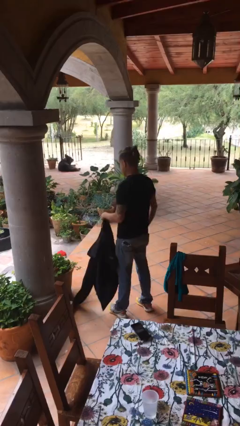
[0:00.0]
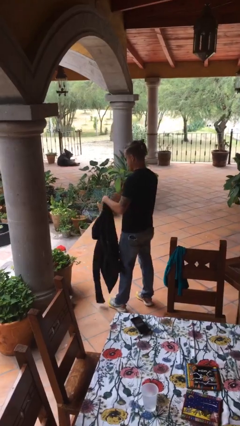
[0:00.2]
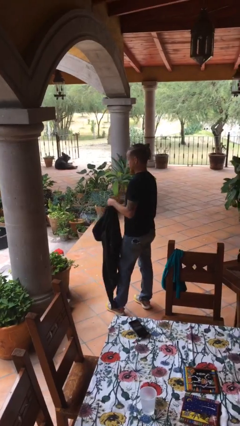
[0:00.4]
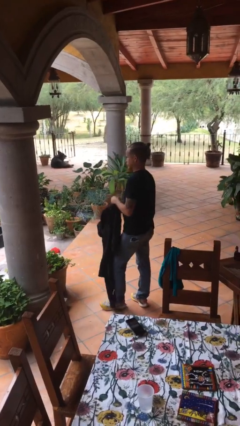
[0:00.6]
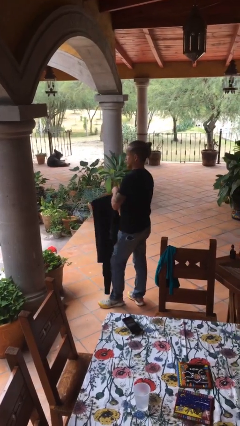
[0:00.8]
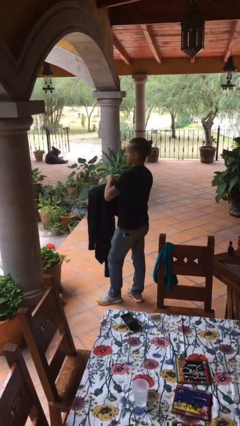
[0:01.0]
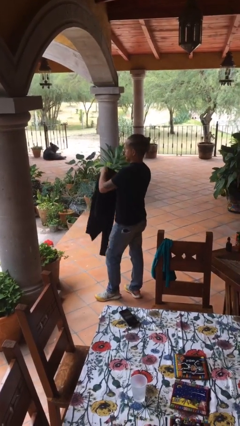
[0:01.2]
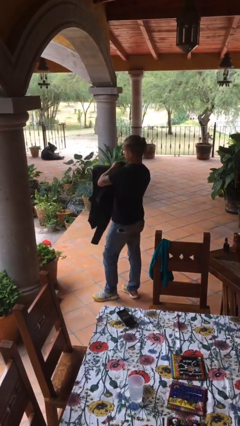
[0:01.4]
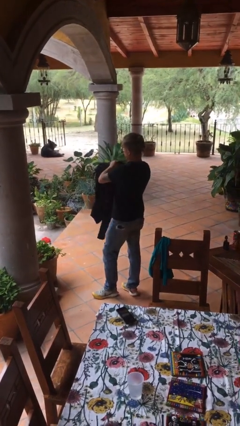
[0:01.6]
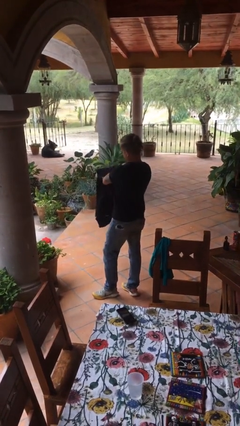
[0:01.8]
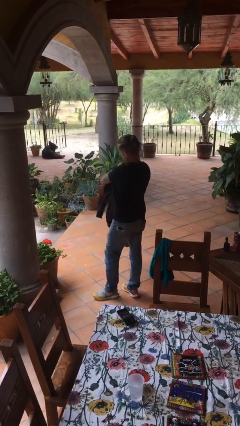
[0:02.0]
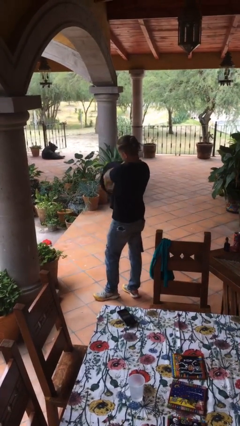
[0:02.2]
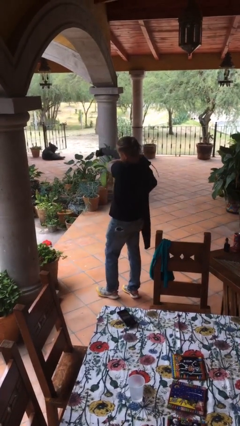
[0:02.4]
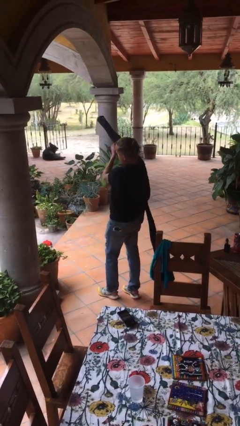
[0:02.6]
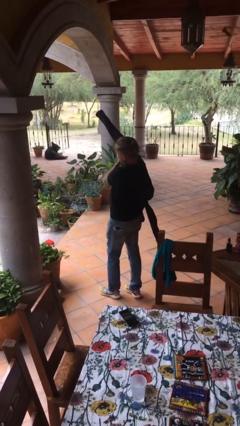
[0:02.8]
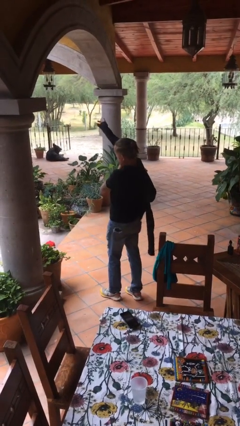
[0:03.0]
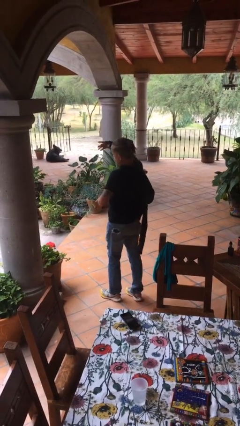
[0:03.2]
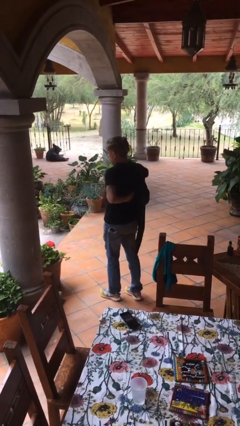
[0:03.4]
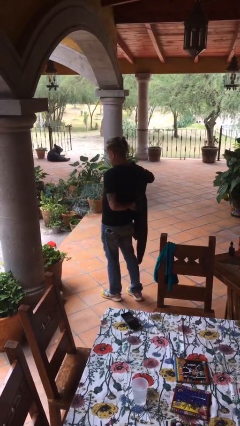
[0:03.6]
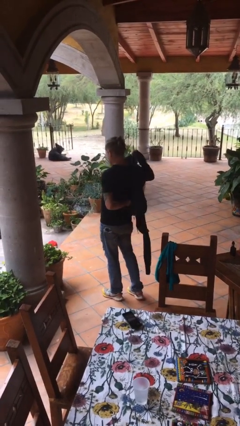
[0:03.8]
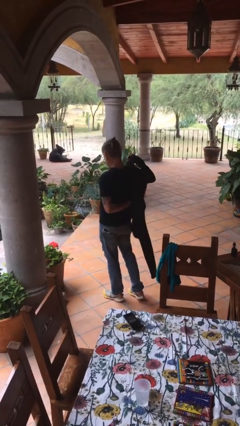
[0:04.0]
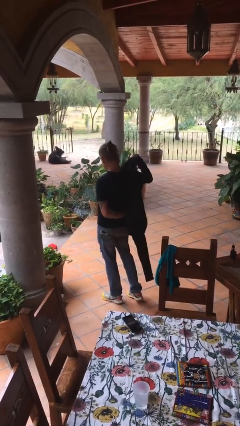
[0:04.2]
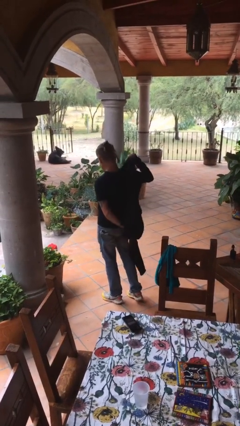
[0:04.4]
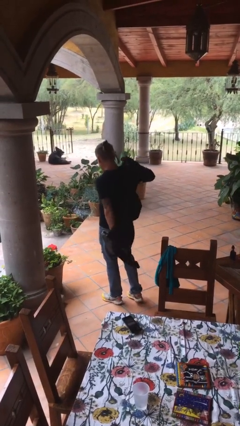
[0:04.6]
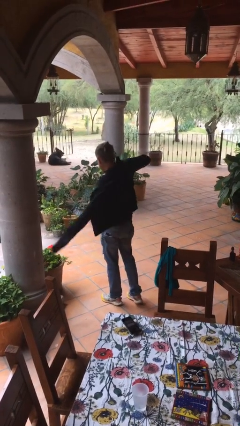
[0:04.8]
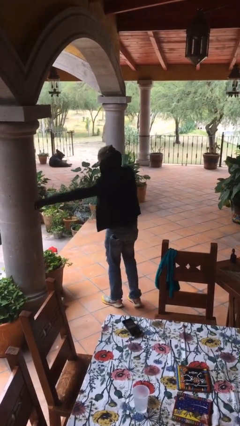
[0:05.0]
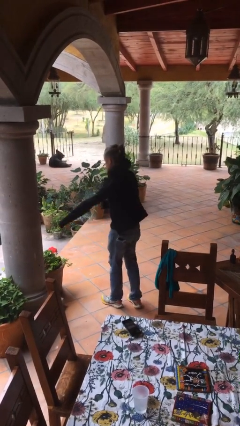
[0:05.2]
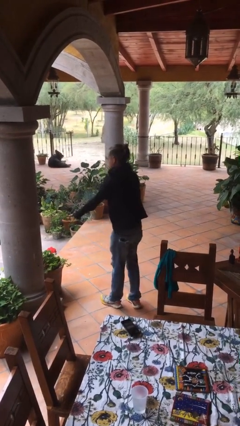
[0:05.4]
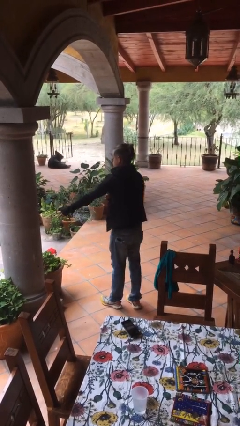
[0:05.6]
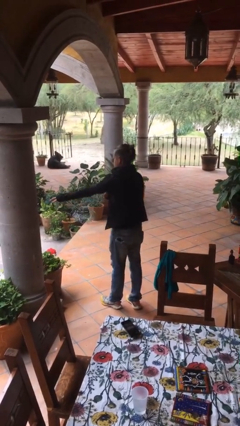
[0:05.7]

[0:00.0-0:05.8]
person puts on jacket

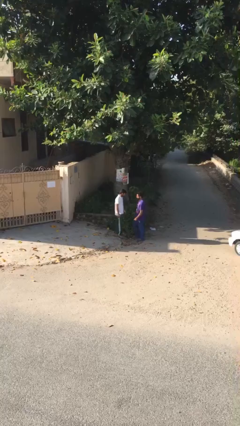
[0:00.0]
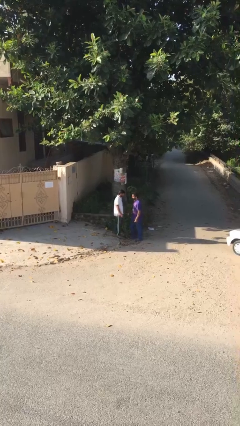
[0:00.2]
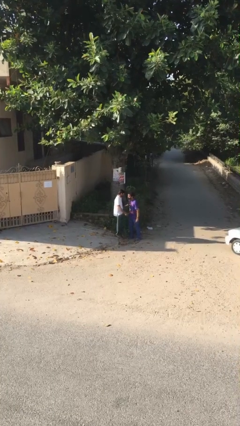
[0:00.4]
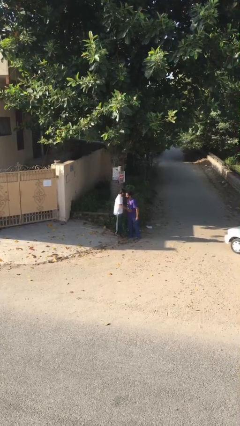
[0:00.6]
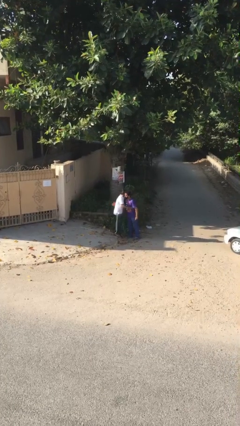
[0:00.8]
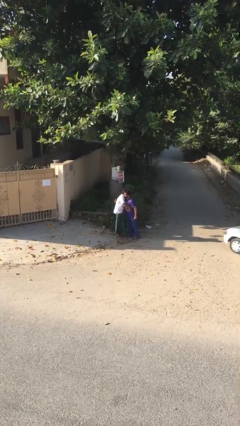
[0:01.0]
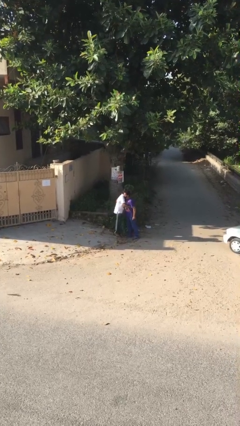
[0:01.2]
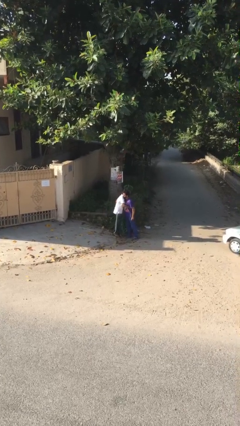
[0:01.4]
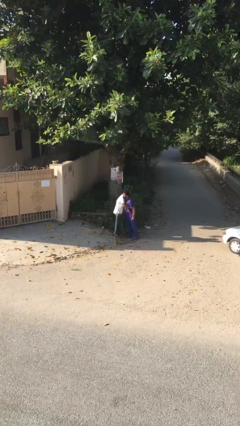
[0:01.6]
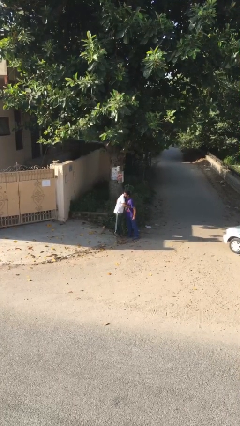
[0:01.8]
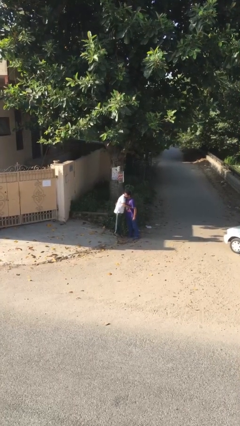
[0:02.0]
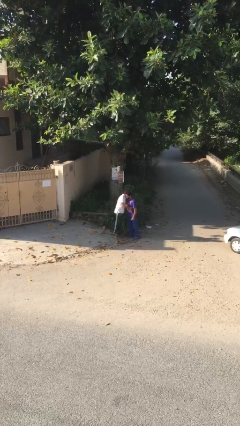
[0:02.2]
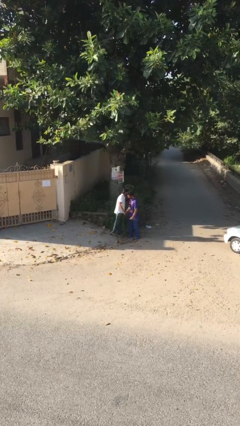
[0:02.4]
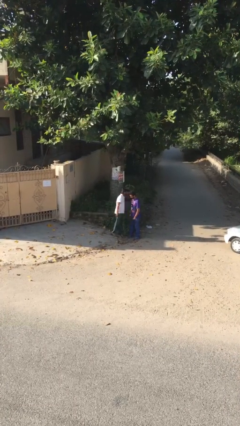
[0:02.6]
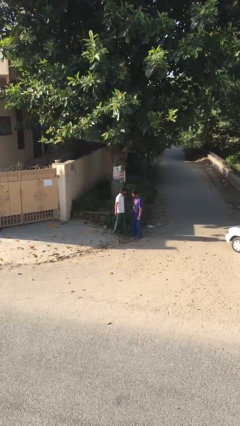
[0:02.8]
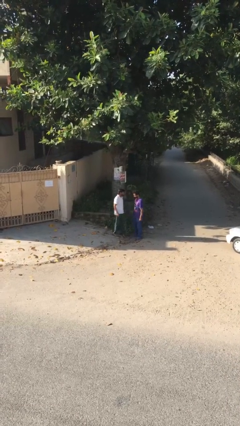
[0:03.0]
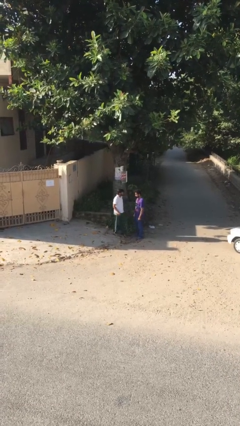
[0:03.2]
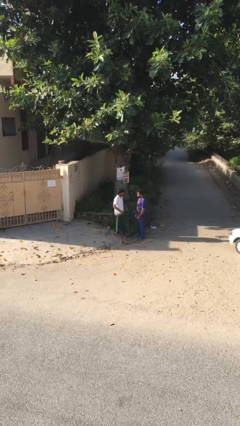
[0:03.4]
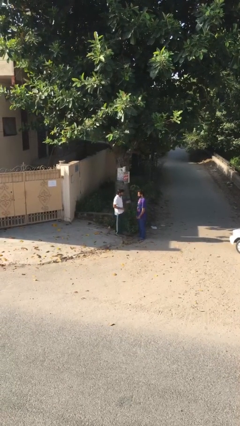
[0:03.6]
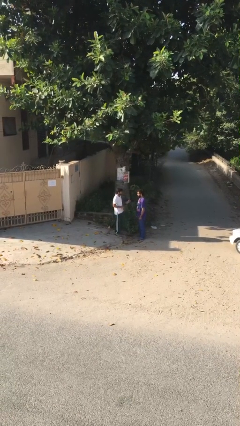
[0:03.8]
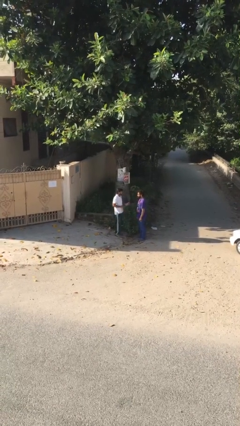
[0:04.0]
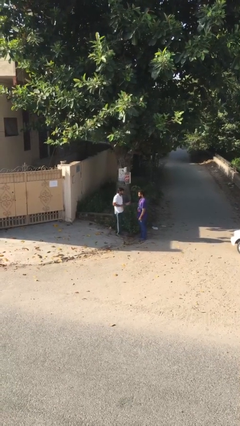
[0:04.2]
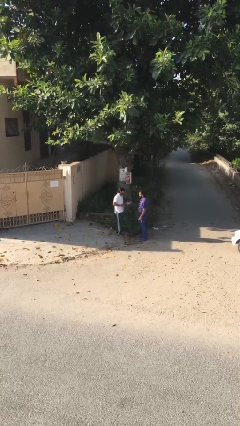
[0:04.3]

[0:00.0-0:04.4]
person embraces person

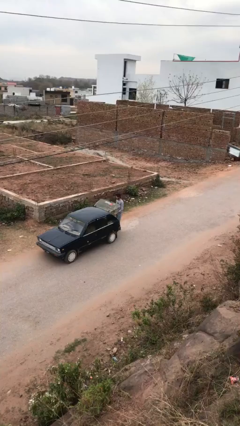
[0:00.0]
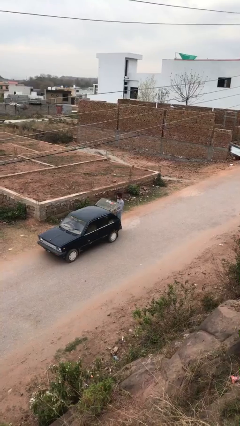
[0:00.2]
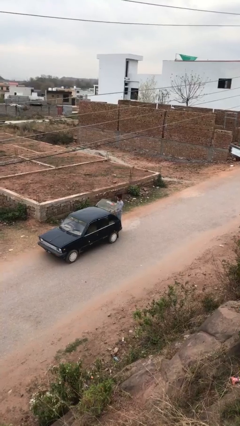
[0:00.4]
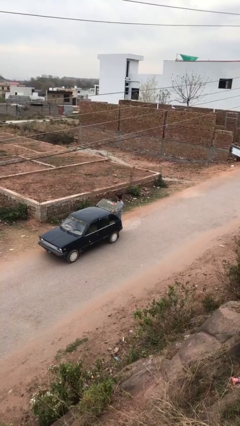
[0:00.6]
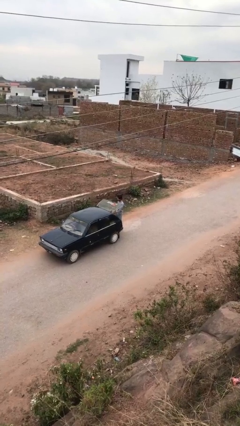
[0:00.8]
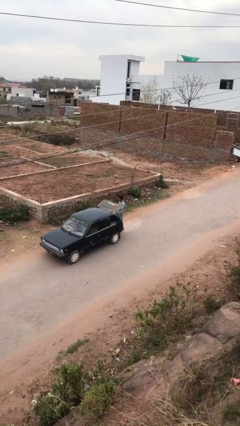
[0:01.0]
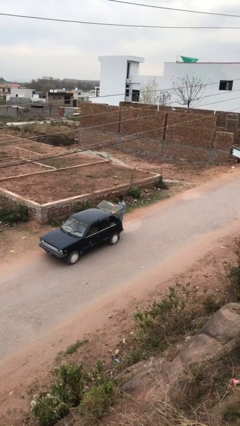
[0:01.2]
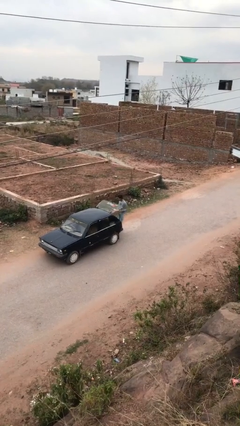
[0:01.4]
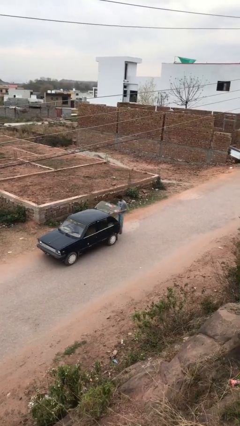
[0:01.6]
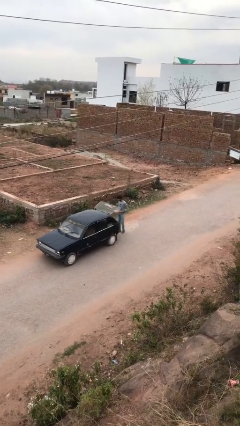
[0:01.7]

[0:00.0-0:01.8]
person unloads car

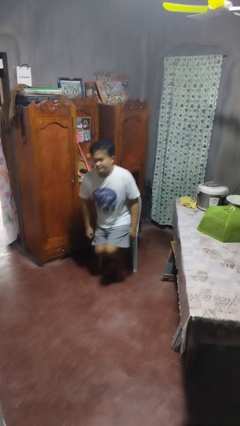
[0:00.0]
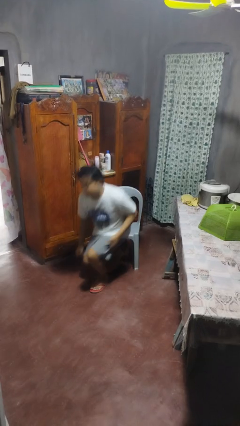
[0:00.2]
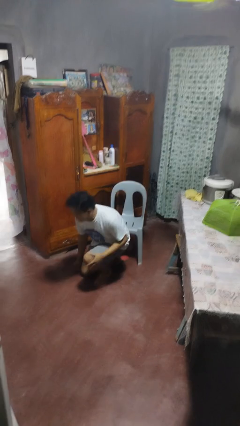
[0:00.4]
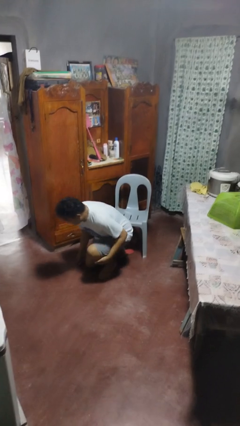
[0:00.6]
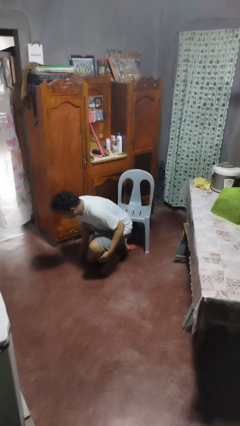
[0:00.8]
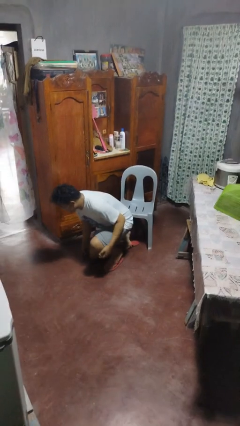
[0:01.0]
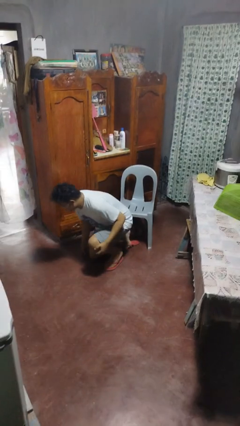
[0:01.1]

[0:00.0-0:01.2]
person falls from chair

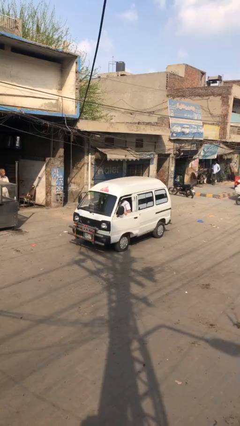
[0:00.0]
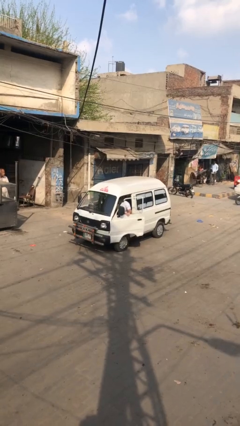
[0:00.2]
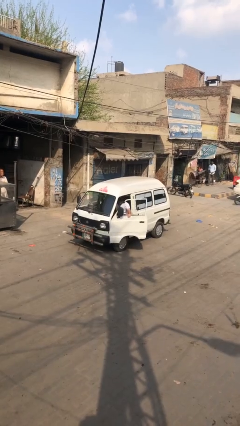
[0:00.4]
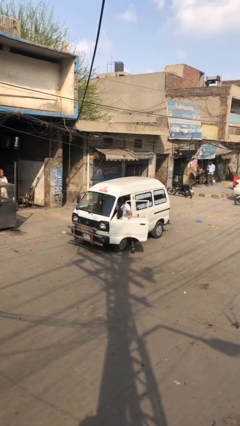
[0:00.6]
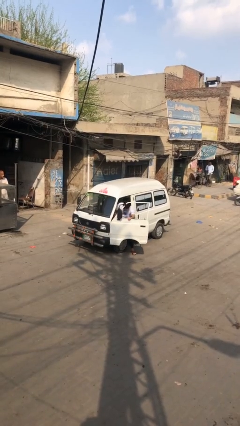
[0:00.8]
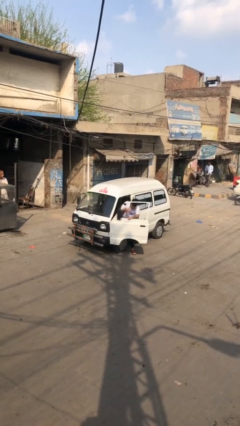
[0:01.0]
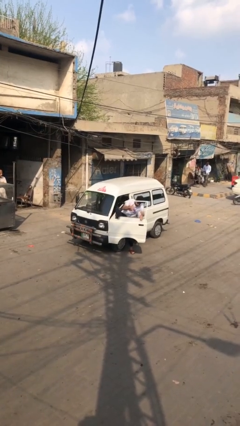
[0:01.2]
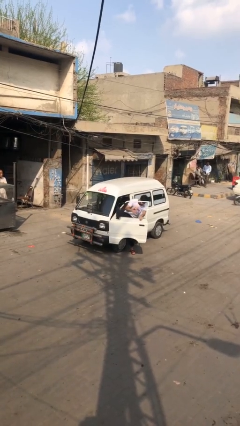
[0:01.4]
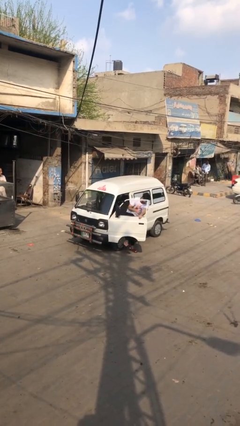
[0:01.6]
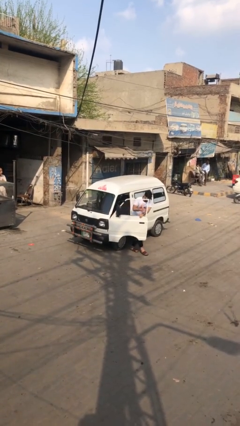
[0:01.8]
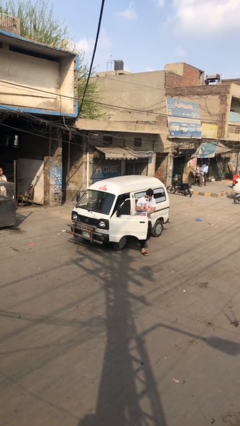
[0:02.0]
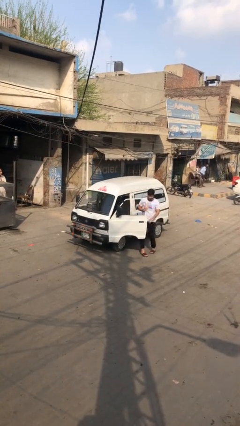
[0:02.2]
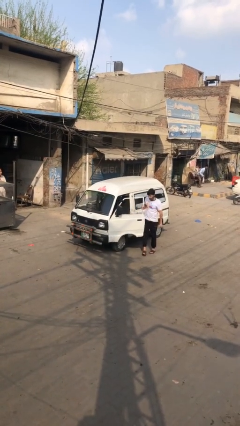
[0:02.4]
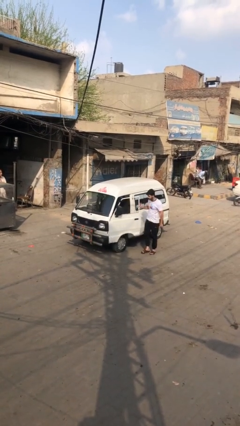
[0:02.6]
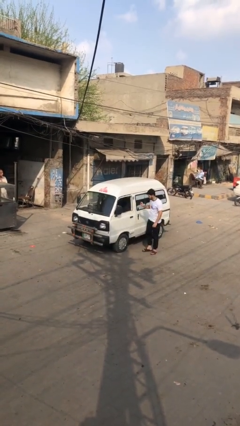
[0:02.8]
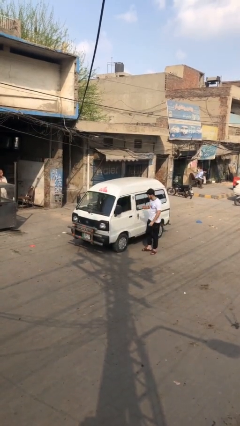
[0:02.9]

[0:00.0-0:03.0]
car drops off person

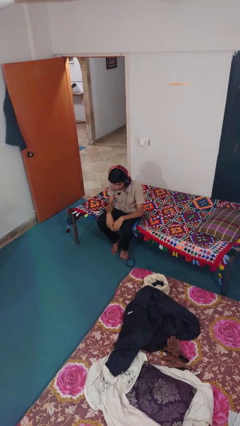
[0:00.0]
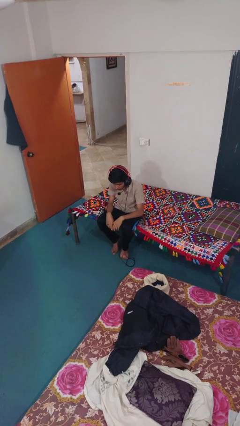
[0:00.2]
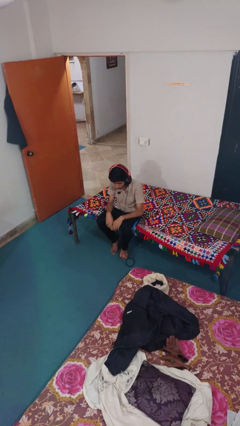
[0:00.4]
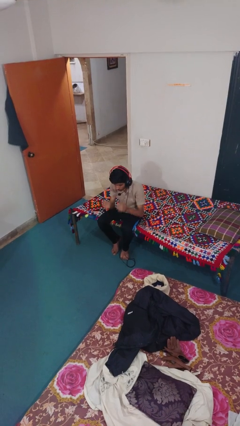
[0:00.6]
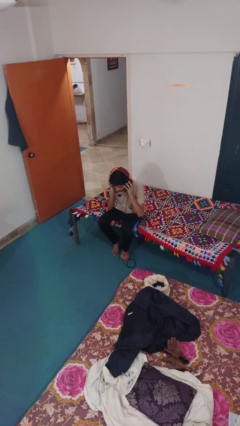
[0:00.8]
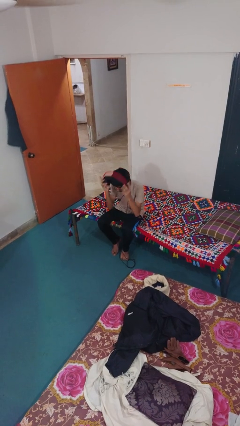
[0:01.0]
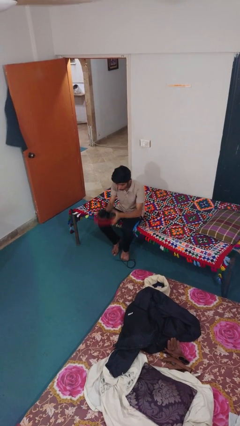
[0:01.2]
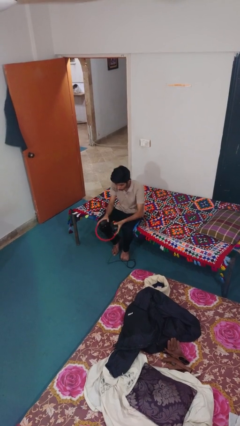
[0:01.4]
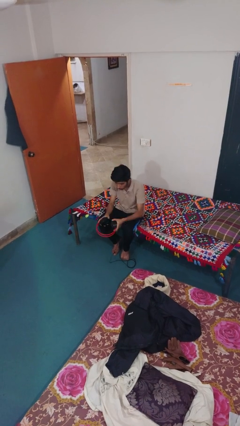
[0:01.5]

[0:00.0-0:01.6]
person takes off headphones
